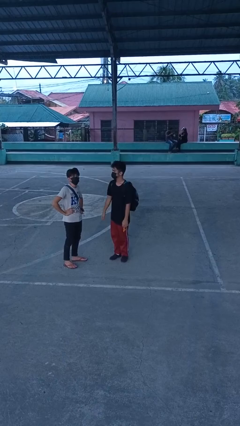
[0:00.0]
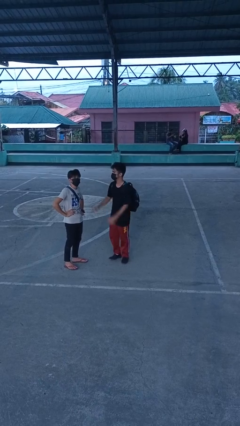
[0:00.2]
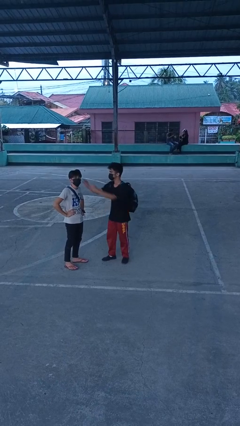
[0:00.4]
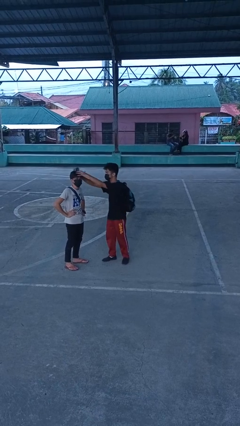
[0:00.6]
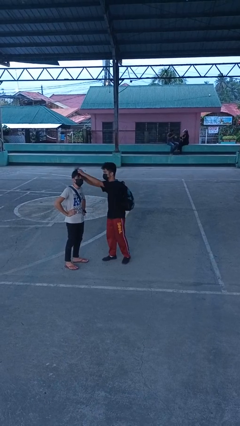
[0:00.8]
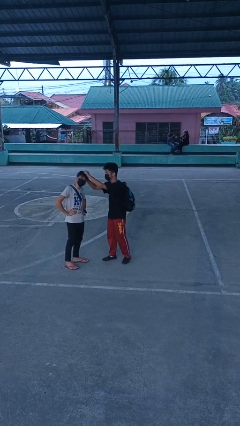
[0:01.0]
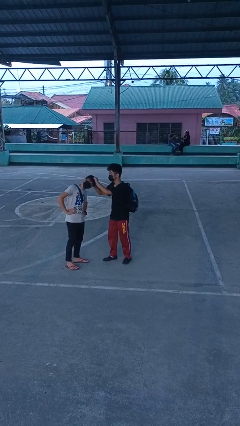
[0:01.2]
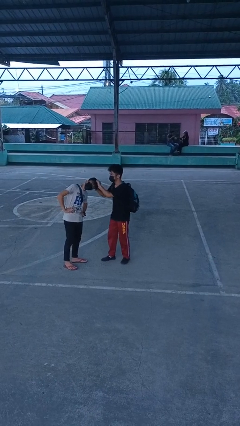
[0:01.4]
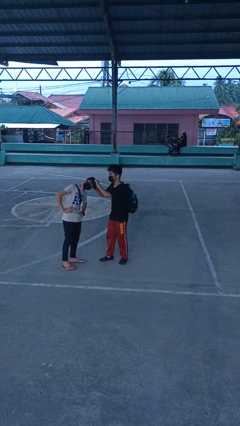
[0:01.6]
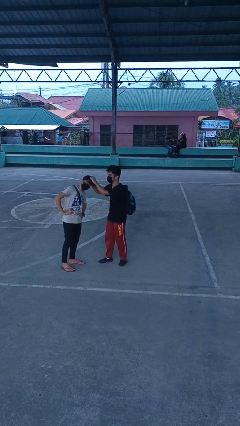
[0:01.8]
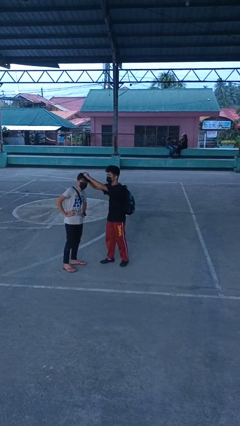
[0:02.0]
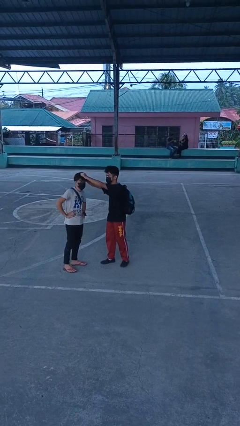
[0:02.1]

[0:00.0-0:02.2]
person grabs person by hair

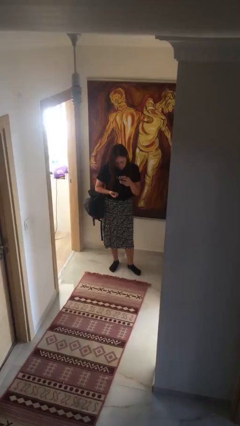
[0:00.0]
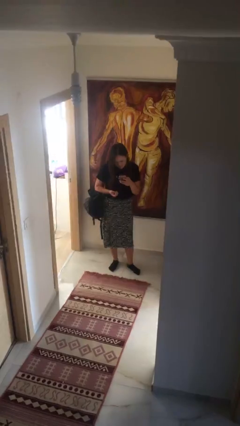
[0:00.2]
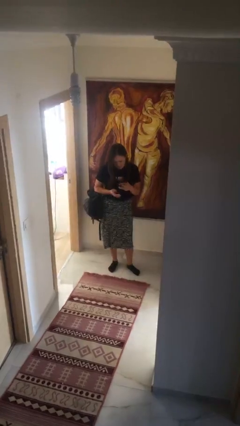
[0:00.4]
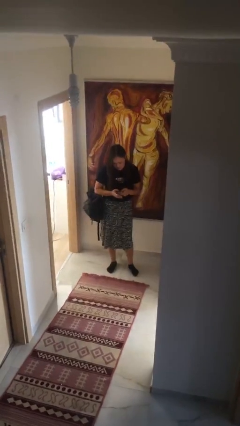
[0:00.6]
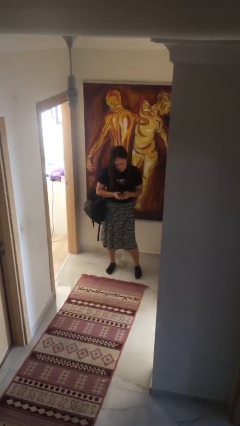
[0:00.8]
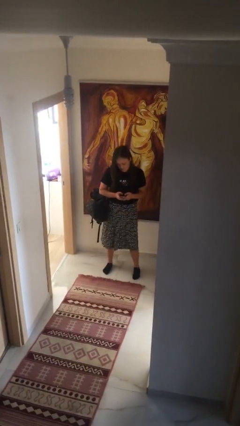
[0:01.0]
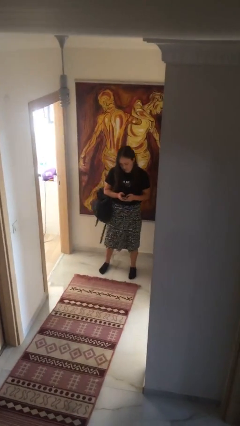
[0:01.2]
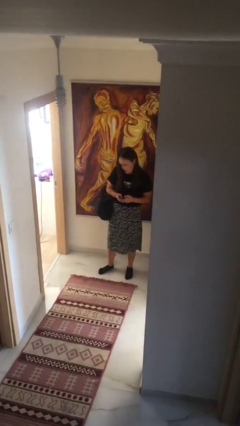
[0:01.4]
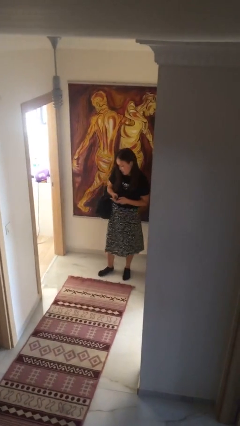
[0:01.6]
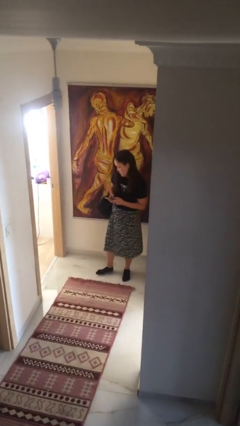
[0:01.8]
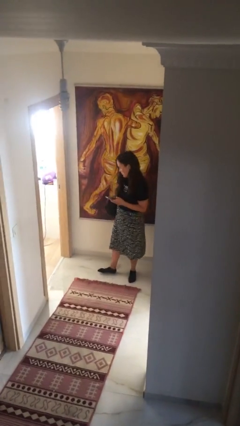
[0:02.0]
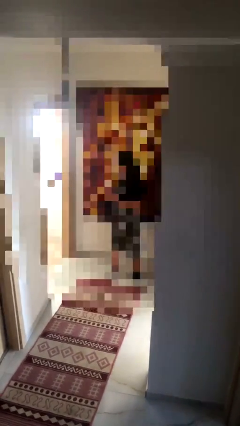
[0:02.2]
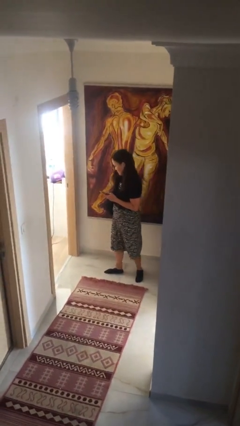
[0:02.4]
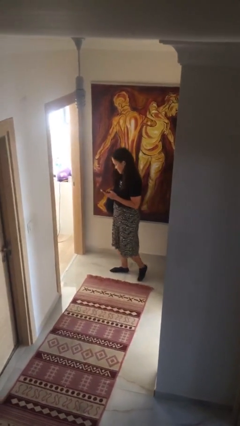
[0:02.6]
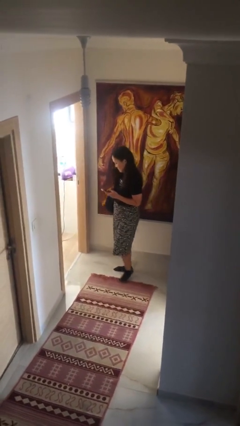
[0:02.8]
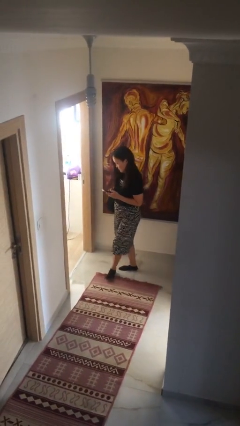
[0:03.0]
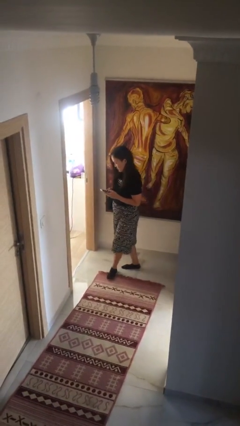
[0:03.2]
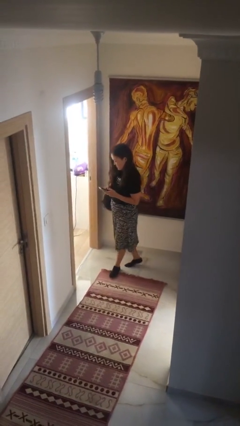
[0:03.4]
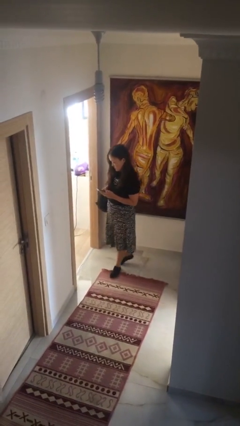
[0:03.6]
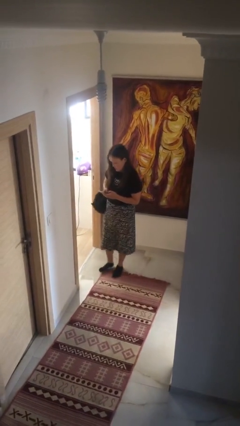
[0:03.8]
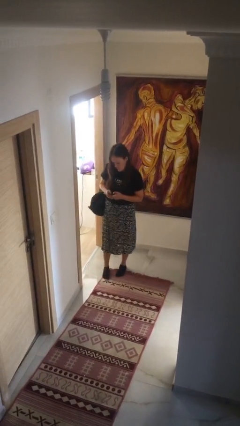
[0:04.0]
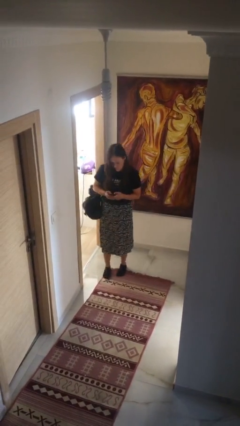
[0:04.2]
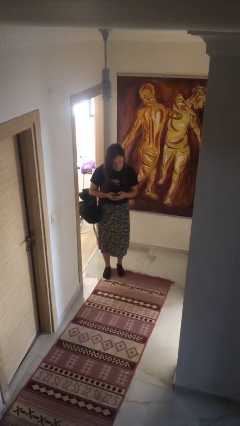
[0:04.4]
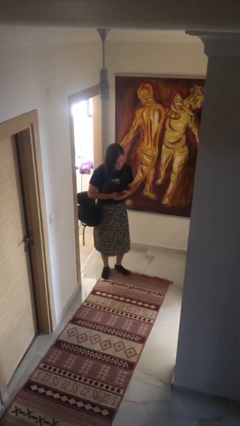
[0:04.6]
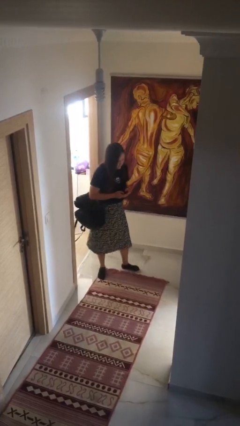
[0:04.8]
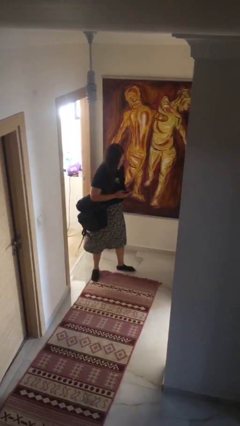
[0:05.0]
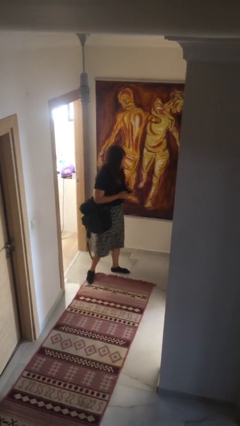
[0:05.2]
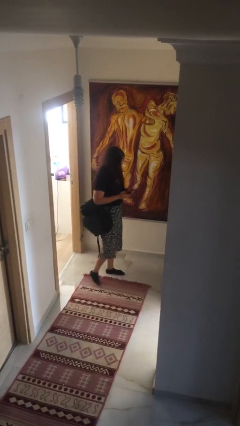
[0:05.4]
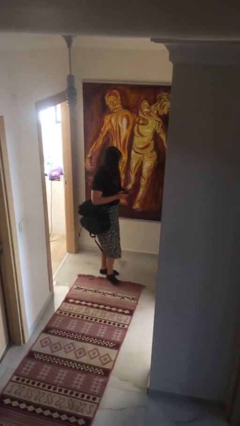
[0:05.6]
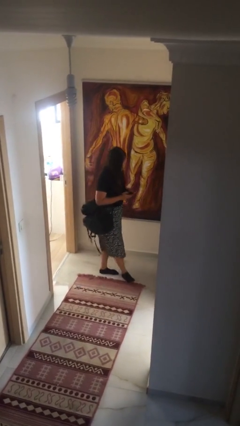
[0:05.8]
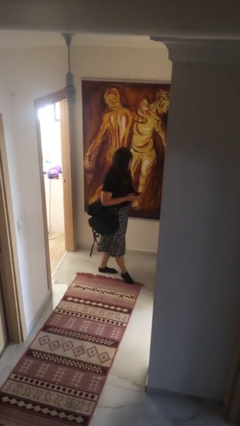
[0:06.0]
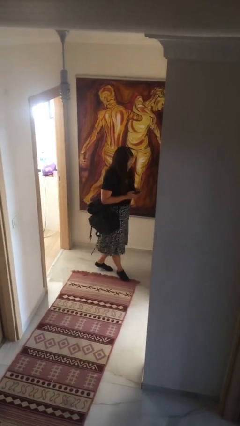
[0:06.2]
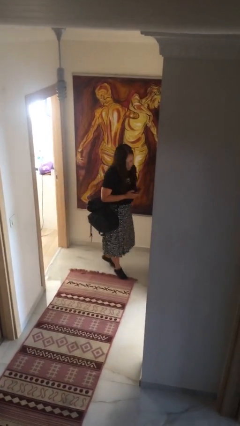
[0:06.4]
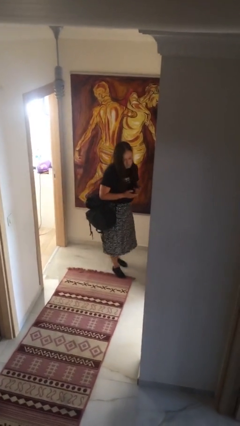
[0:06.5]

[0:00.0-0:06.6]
person texts on phone

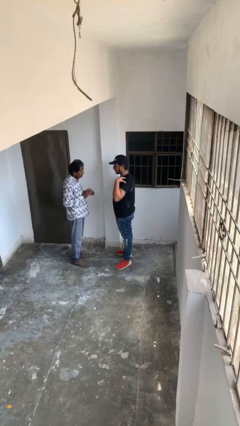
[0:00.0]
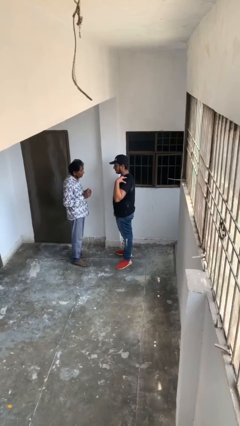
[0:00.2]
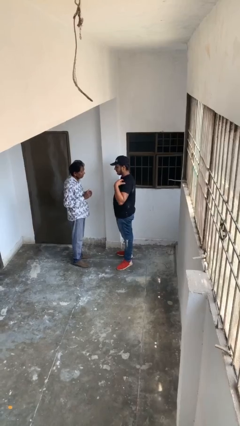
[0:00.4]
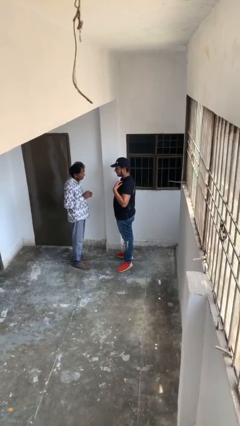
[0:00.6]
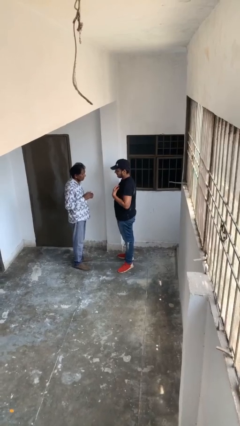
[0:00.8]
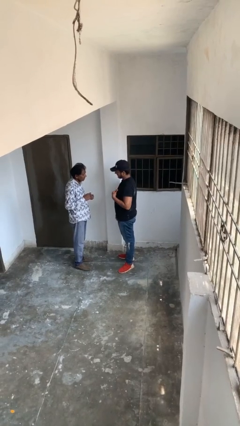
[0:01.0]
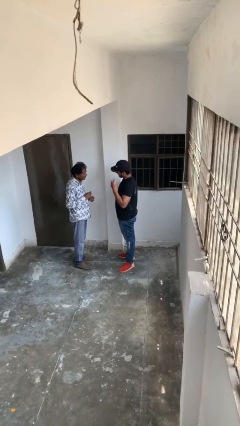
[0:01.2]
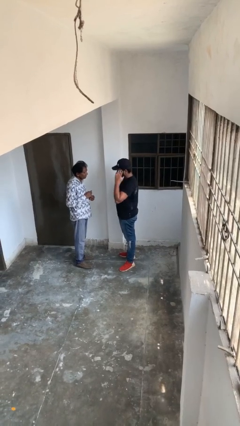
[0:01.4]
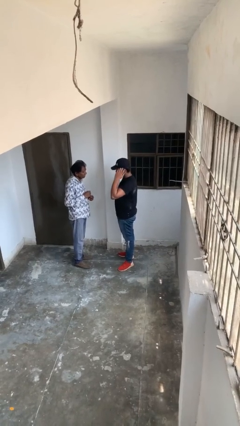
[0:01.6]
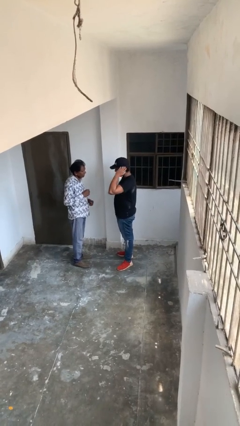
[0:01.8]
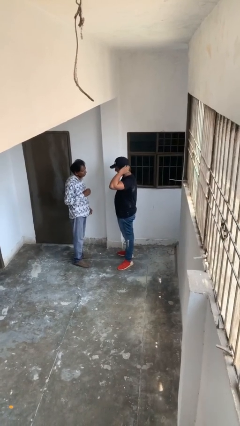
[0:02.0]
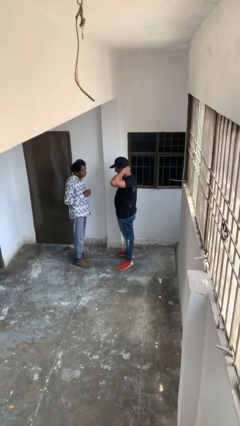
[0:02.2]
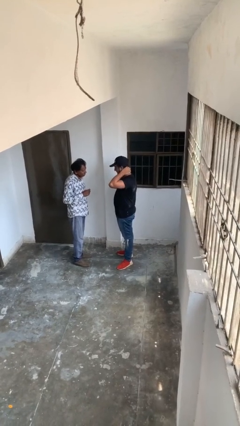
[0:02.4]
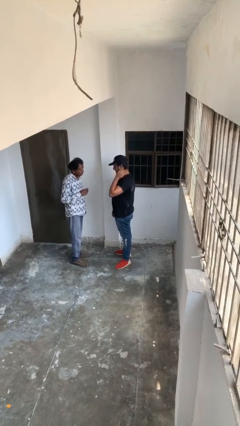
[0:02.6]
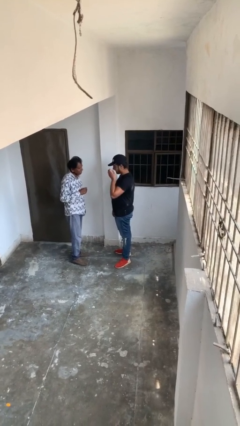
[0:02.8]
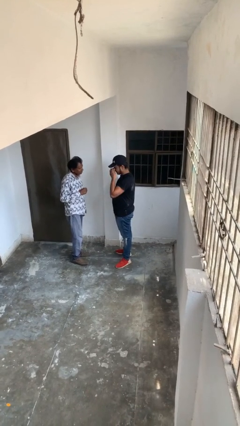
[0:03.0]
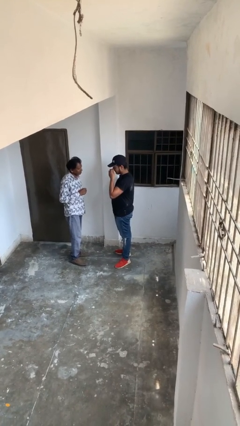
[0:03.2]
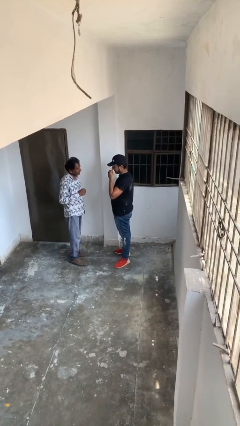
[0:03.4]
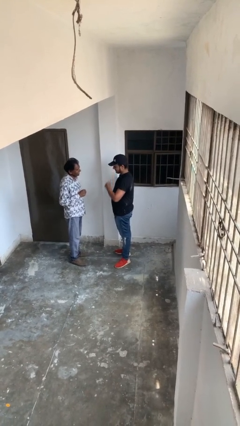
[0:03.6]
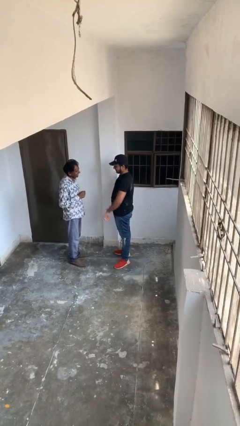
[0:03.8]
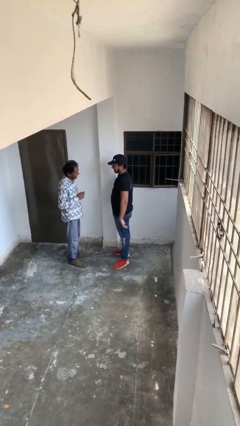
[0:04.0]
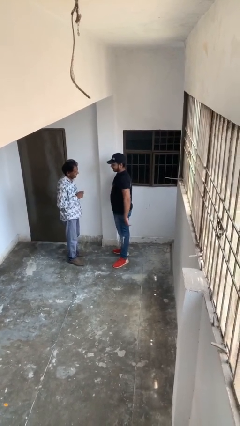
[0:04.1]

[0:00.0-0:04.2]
person talks to person

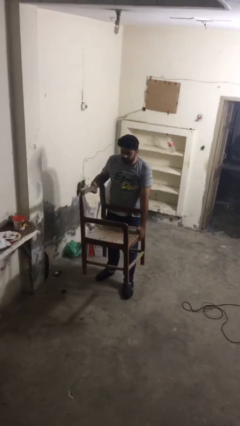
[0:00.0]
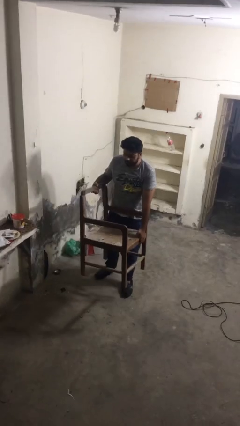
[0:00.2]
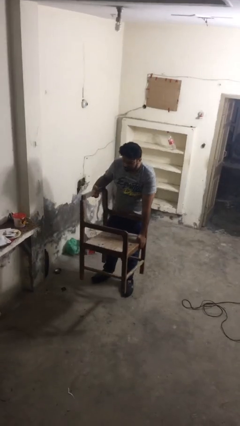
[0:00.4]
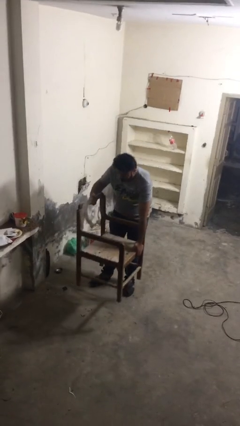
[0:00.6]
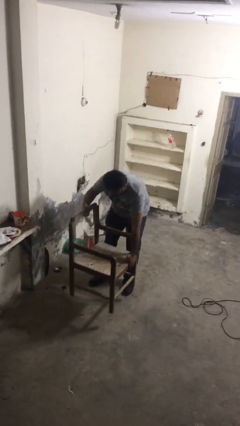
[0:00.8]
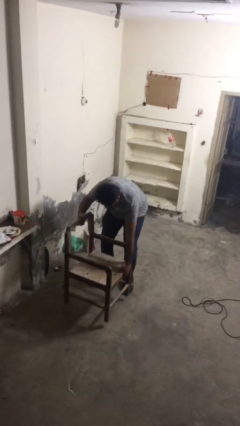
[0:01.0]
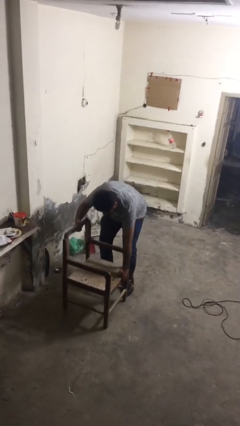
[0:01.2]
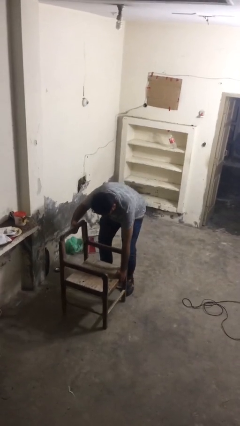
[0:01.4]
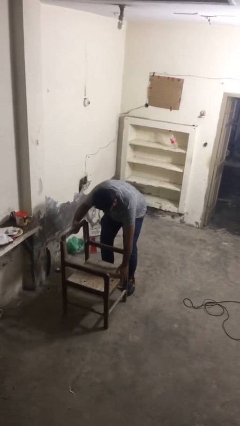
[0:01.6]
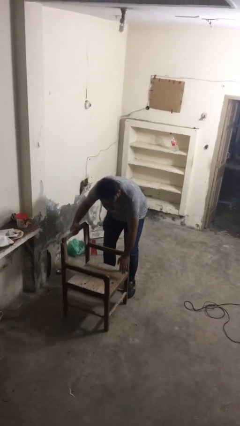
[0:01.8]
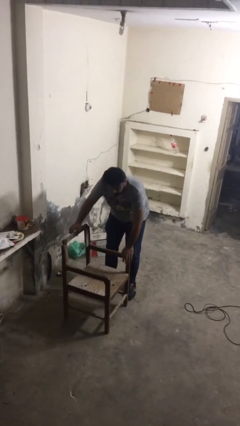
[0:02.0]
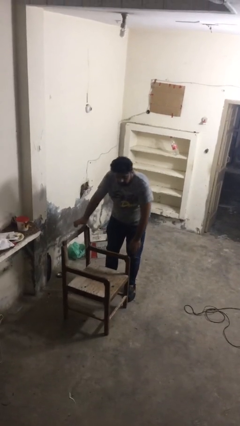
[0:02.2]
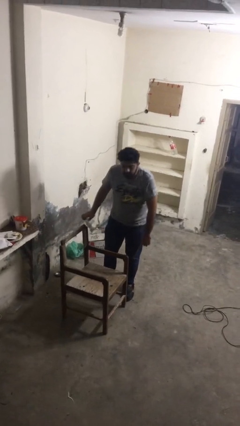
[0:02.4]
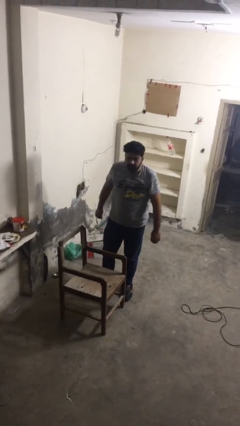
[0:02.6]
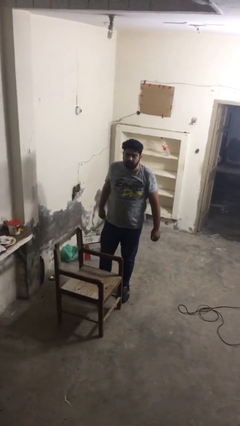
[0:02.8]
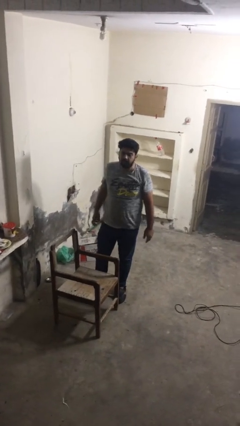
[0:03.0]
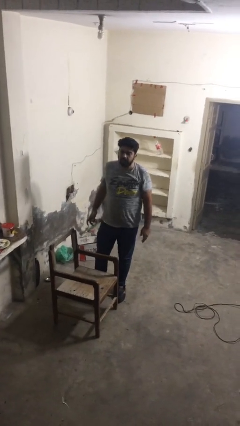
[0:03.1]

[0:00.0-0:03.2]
person puts down object on floor

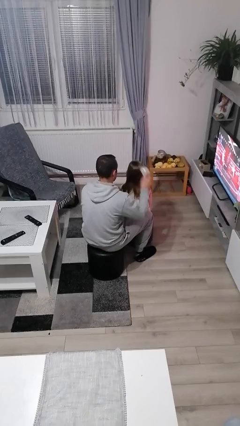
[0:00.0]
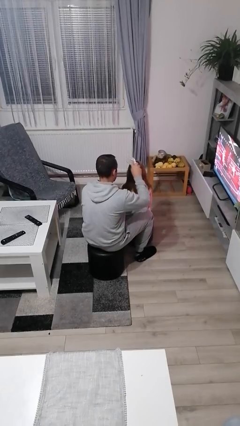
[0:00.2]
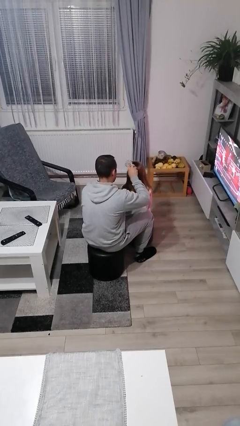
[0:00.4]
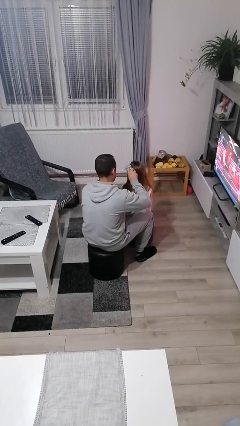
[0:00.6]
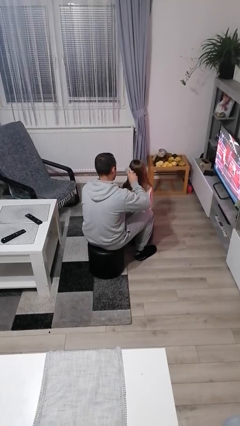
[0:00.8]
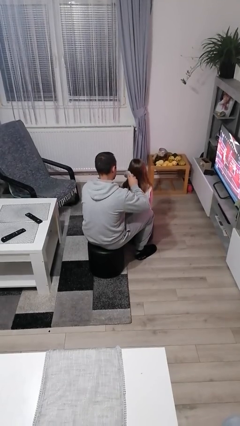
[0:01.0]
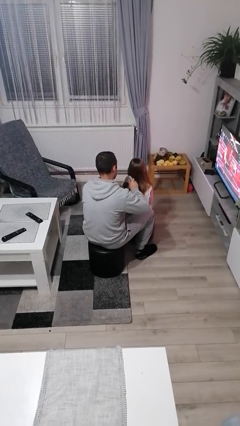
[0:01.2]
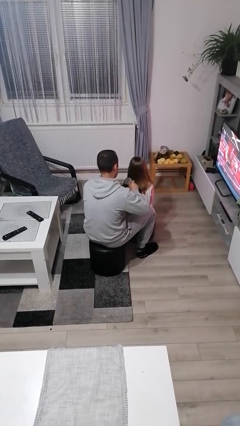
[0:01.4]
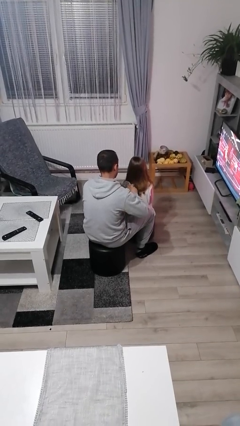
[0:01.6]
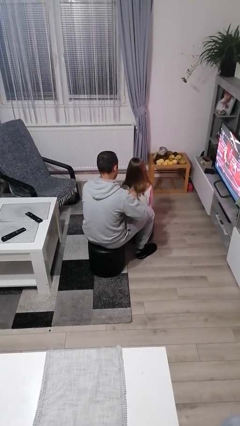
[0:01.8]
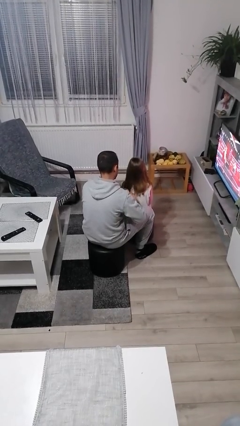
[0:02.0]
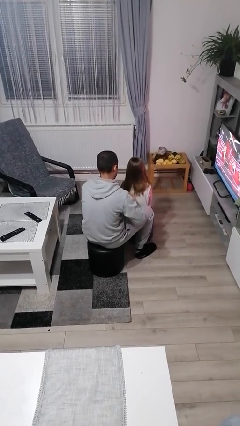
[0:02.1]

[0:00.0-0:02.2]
person brushes hair of person
